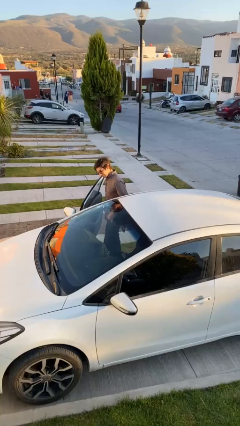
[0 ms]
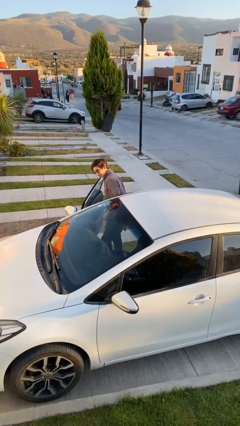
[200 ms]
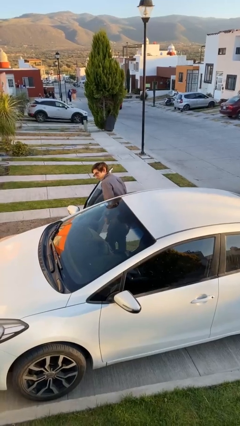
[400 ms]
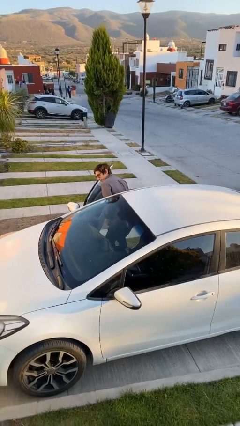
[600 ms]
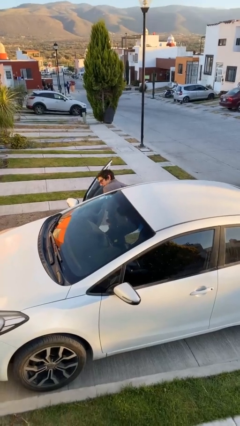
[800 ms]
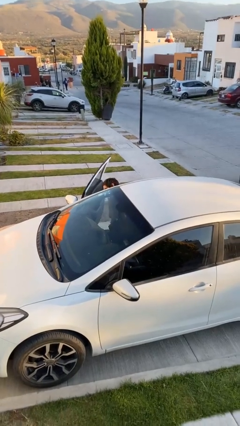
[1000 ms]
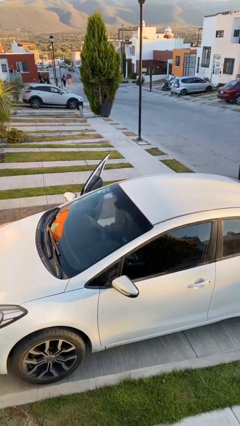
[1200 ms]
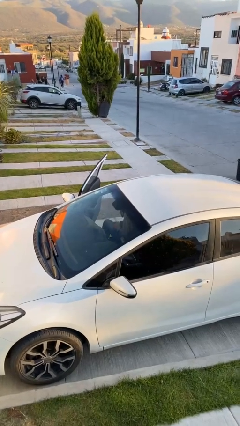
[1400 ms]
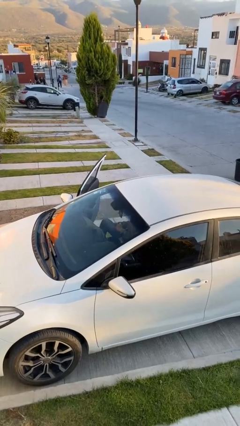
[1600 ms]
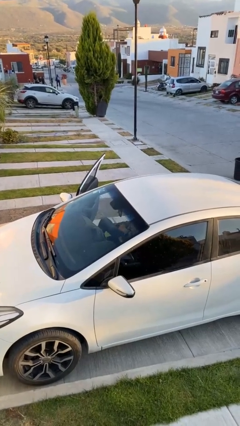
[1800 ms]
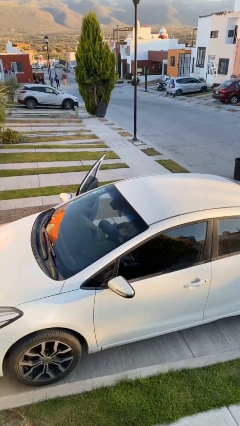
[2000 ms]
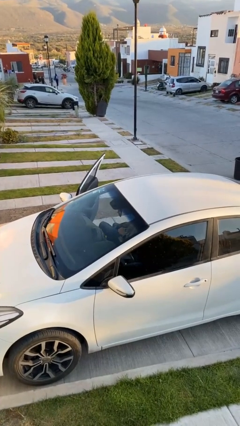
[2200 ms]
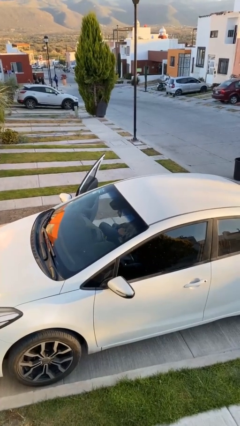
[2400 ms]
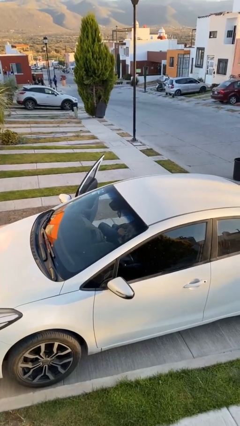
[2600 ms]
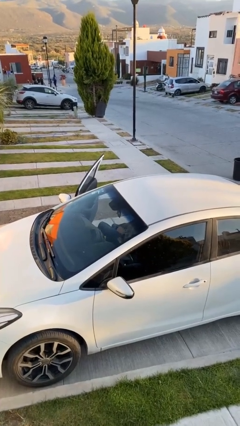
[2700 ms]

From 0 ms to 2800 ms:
person enters car

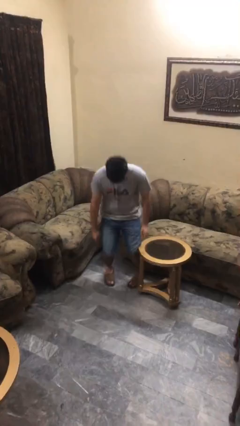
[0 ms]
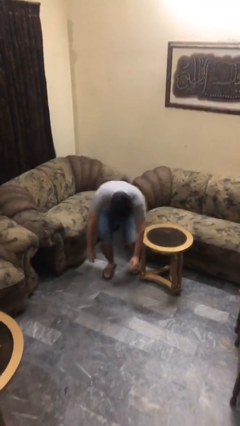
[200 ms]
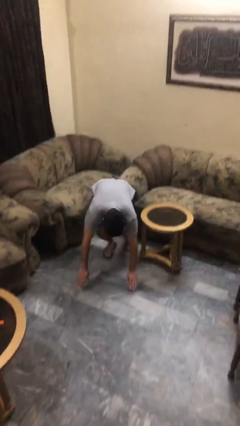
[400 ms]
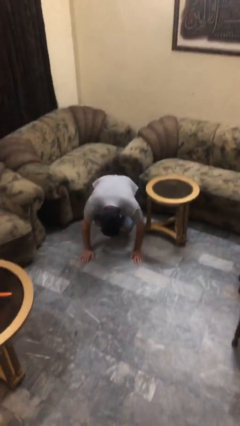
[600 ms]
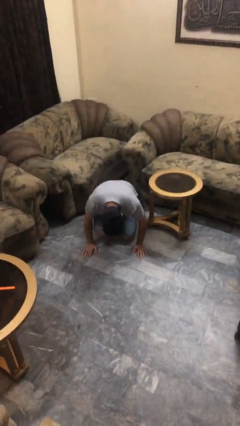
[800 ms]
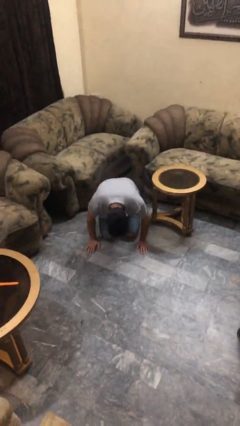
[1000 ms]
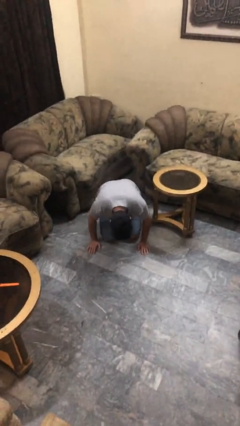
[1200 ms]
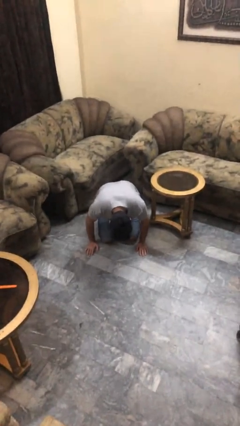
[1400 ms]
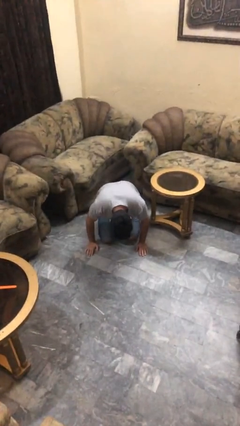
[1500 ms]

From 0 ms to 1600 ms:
person trips on object on floor

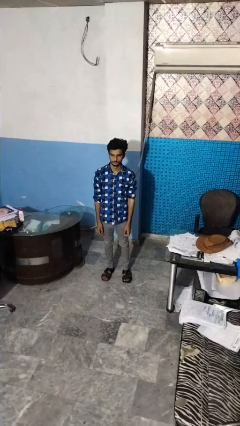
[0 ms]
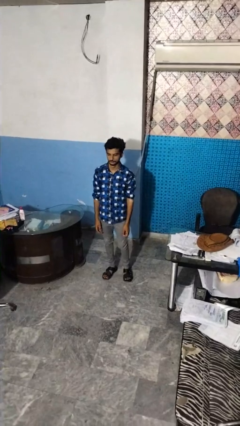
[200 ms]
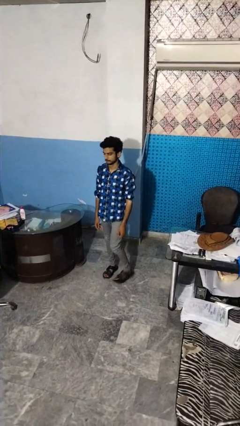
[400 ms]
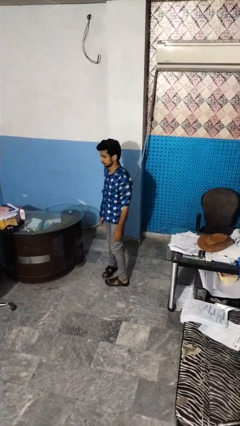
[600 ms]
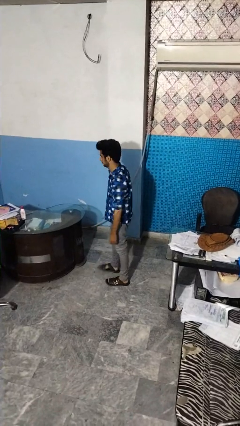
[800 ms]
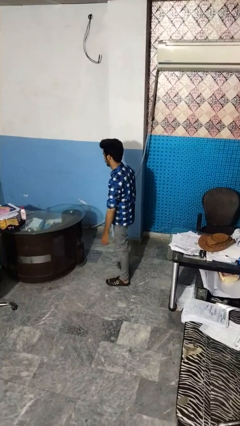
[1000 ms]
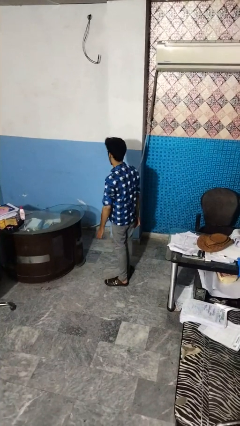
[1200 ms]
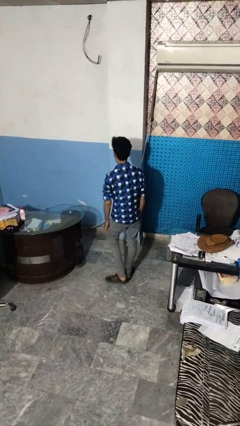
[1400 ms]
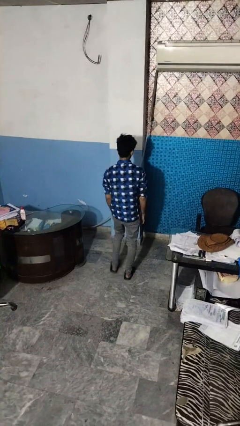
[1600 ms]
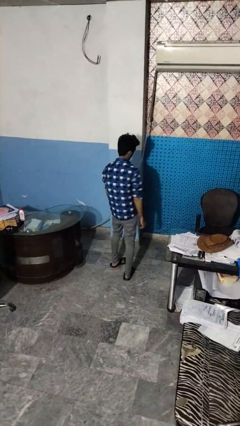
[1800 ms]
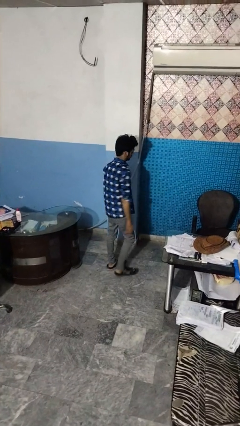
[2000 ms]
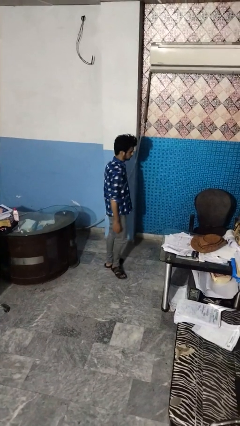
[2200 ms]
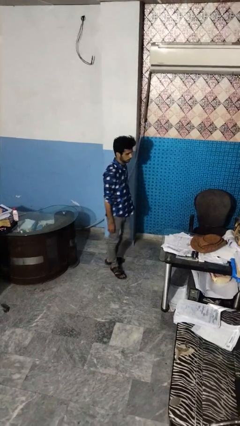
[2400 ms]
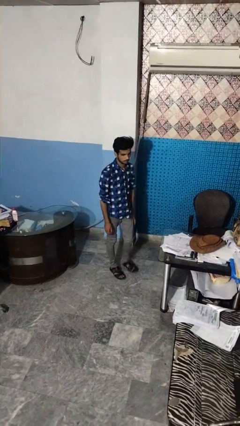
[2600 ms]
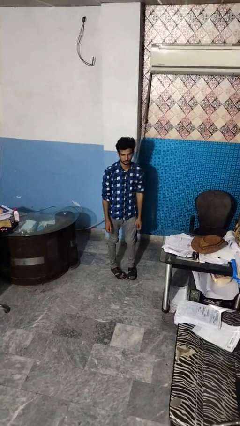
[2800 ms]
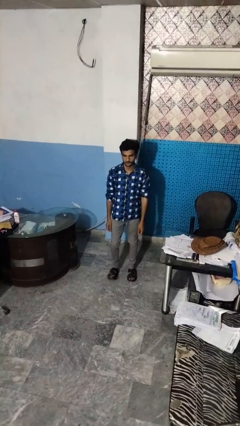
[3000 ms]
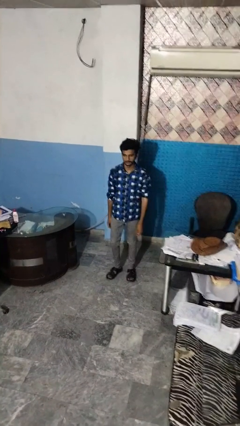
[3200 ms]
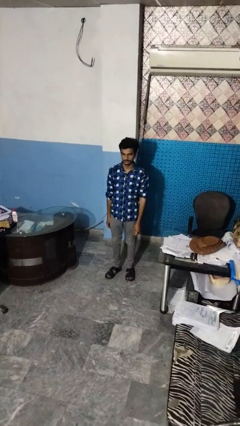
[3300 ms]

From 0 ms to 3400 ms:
person twirls

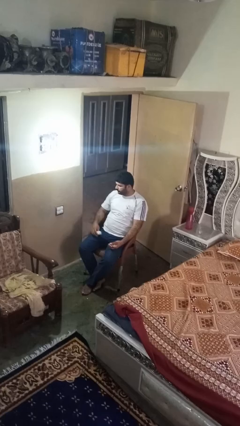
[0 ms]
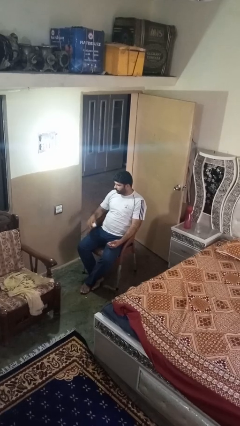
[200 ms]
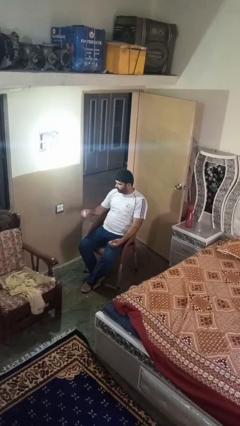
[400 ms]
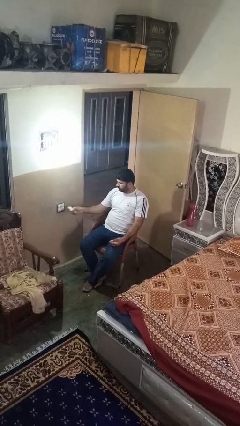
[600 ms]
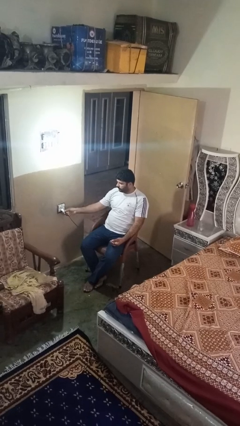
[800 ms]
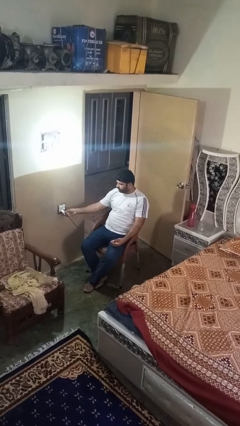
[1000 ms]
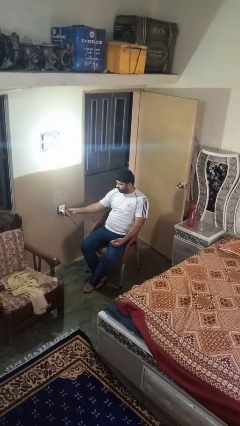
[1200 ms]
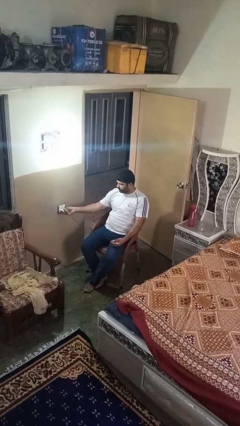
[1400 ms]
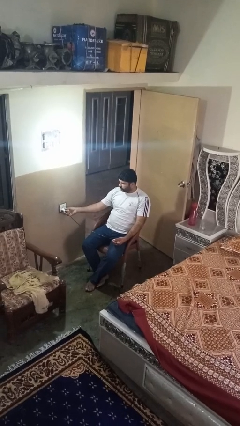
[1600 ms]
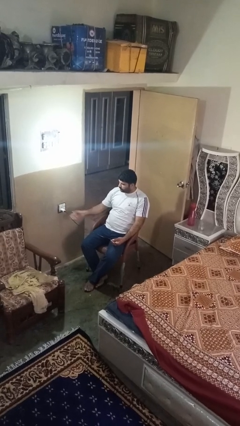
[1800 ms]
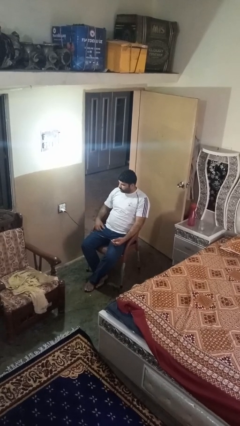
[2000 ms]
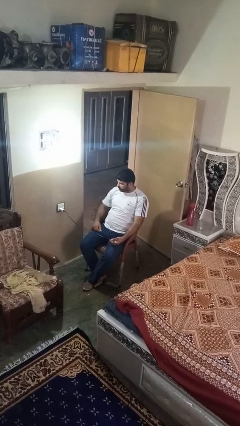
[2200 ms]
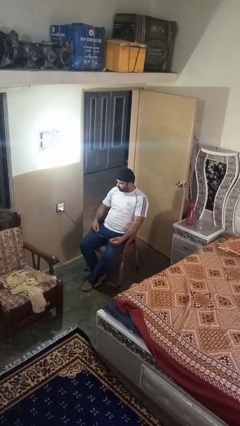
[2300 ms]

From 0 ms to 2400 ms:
person plugs into electrical socket

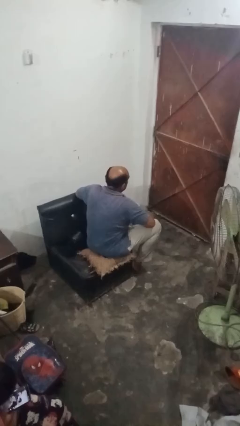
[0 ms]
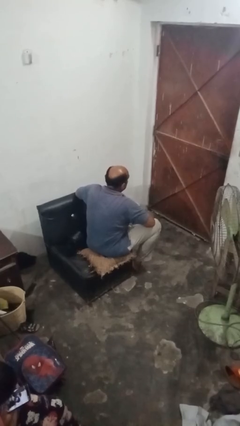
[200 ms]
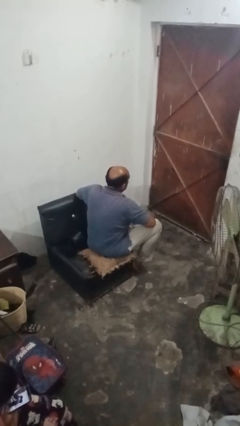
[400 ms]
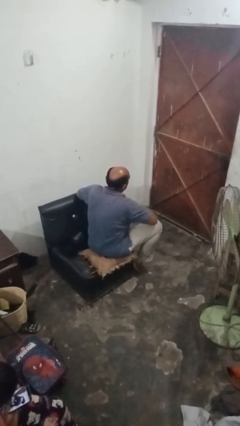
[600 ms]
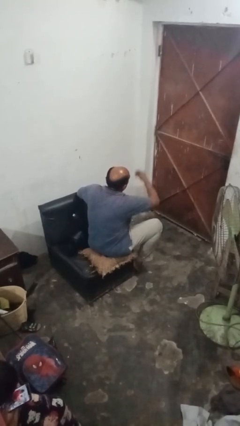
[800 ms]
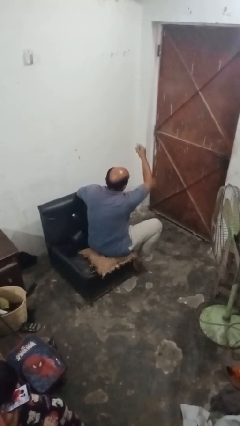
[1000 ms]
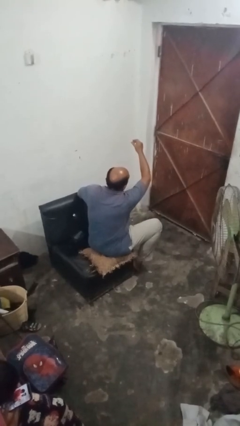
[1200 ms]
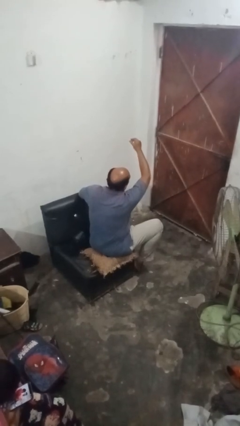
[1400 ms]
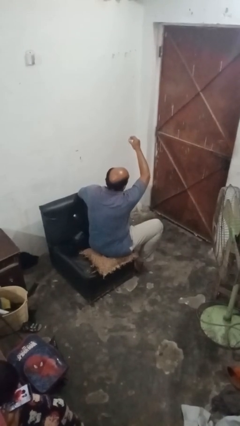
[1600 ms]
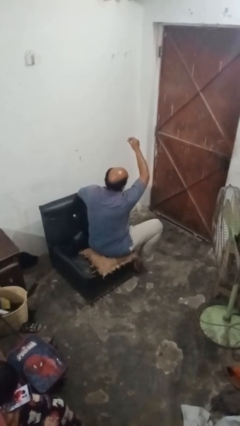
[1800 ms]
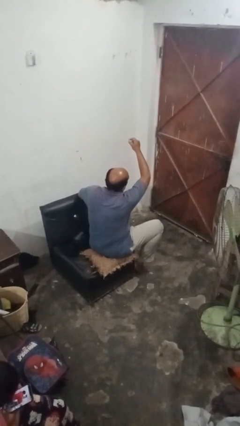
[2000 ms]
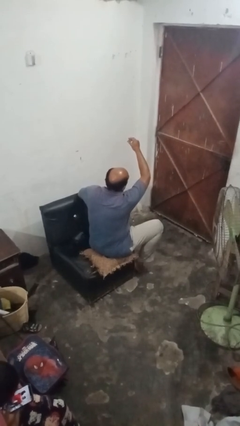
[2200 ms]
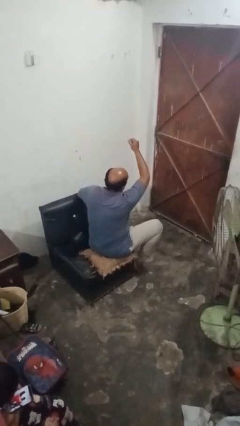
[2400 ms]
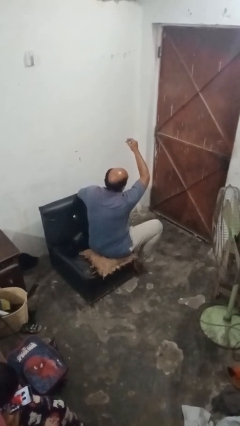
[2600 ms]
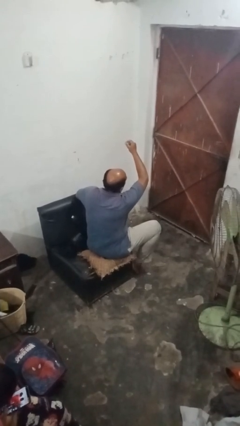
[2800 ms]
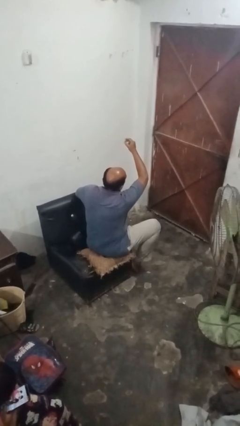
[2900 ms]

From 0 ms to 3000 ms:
person snaps fingers

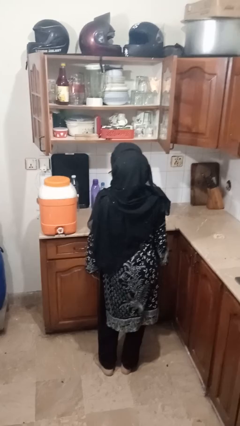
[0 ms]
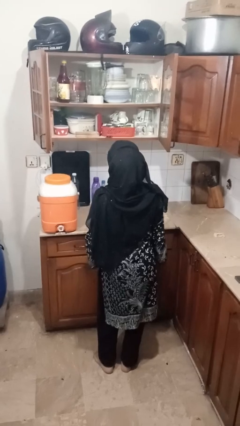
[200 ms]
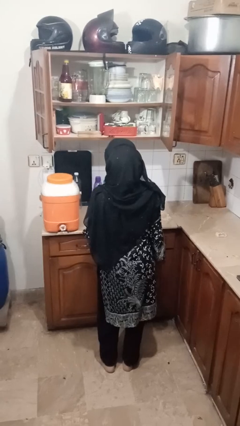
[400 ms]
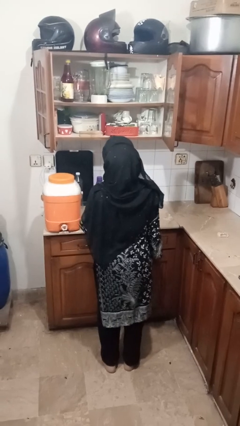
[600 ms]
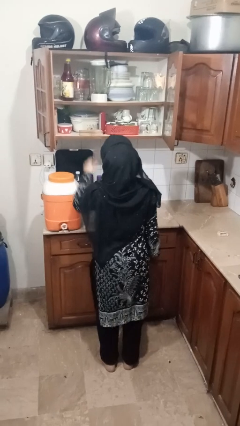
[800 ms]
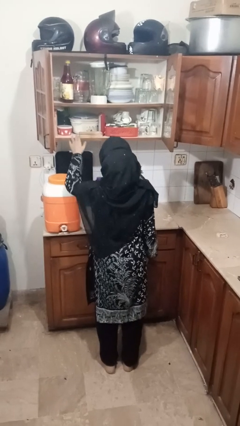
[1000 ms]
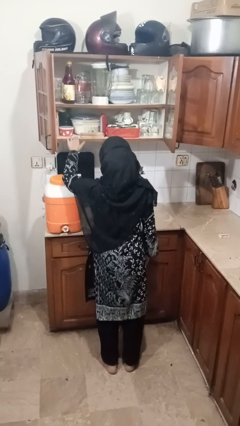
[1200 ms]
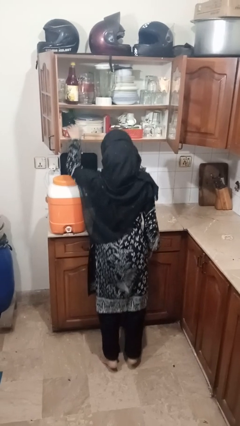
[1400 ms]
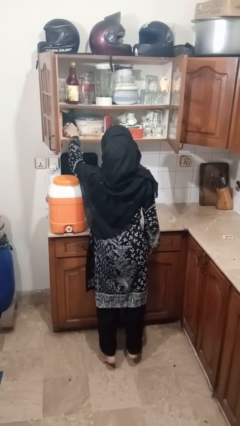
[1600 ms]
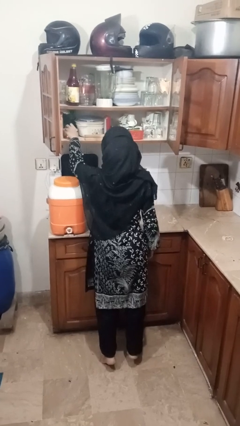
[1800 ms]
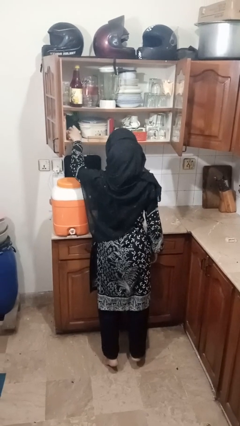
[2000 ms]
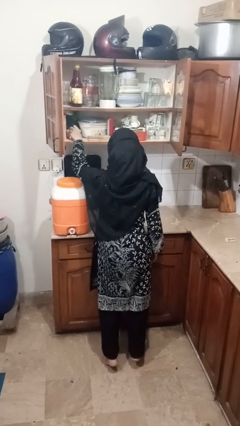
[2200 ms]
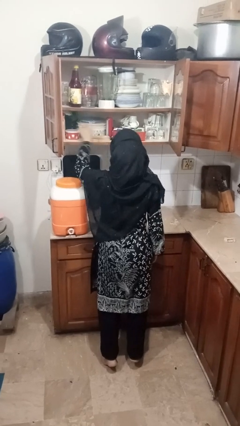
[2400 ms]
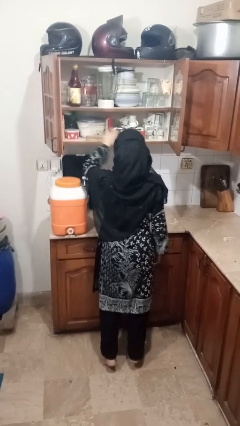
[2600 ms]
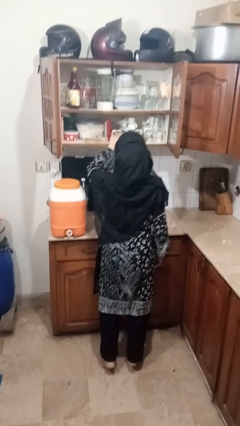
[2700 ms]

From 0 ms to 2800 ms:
person searches in cabinet

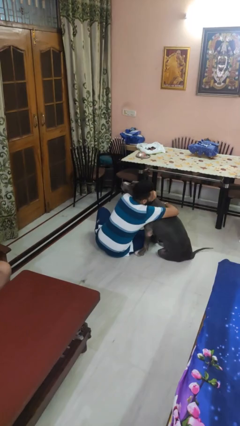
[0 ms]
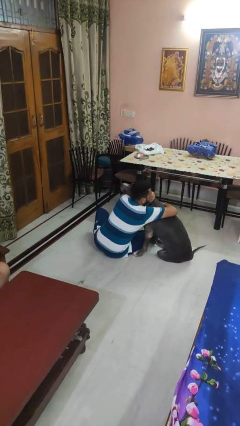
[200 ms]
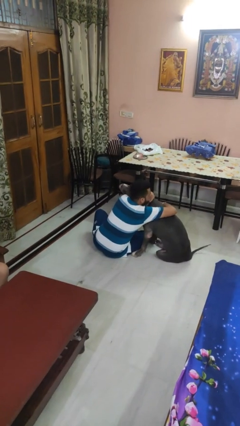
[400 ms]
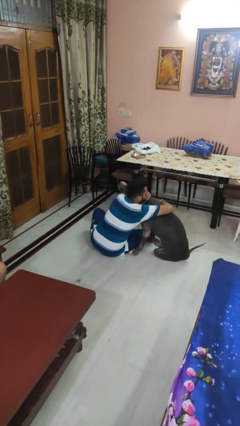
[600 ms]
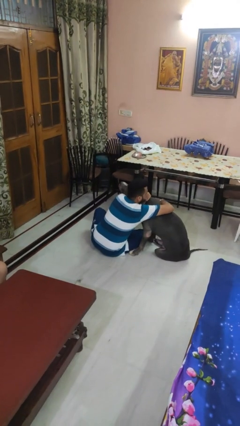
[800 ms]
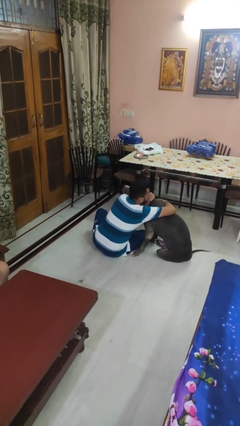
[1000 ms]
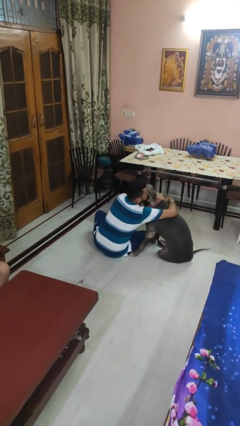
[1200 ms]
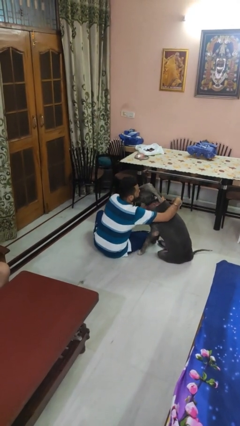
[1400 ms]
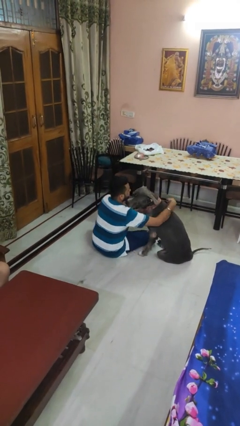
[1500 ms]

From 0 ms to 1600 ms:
person hugs dog
